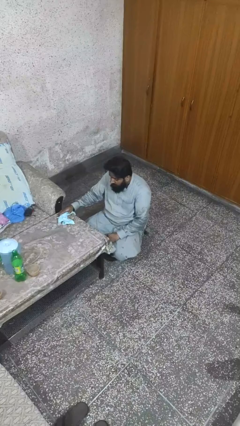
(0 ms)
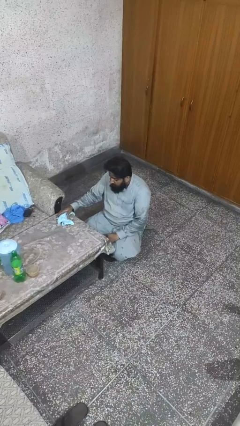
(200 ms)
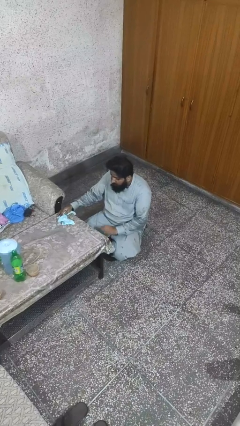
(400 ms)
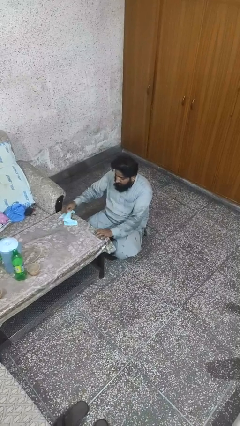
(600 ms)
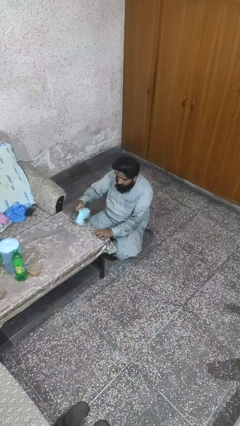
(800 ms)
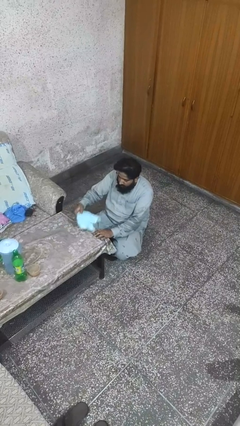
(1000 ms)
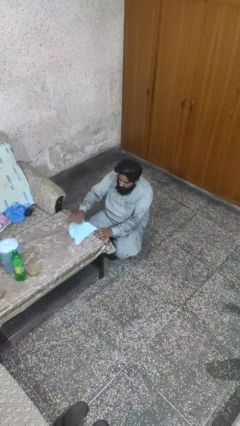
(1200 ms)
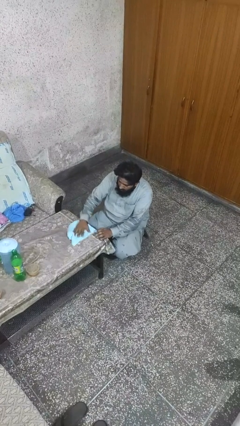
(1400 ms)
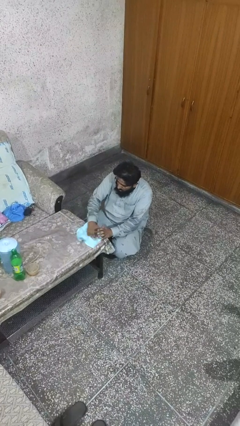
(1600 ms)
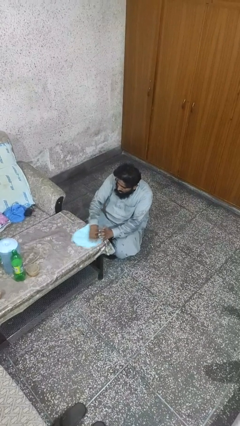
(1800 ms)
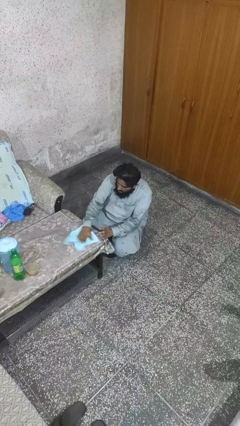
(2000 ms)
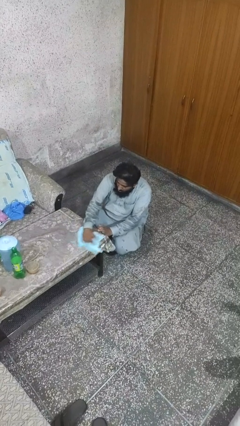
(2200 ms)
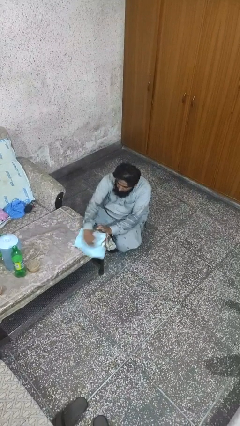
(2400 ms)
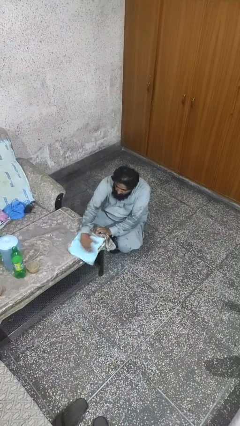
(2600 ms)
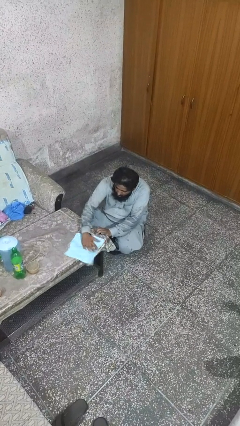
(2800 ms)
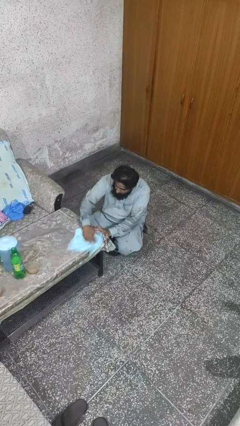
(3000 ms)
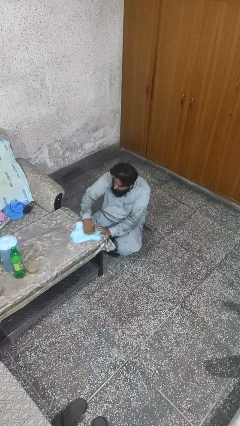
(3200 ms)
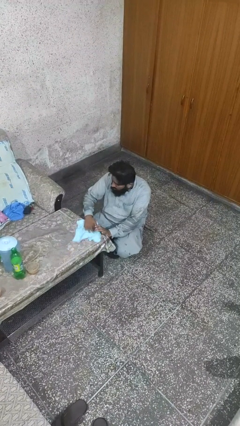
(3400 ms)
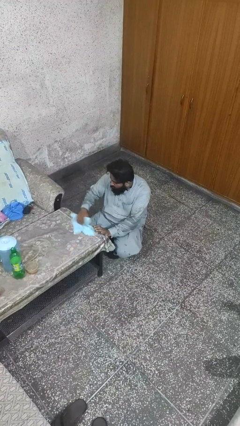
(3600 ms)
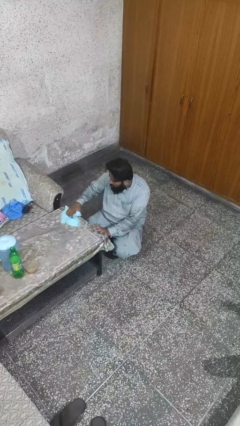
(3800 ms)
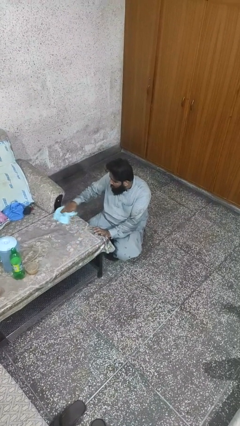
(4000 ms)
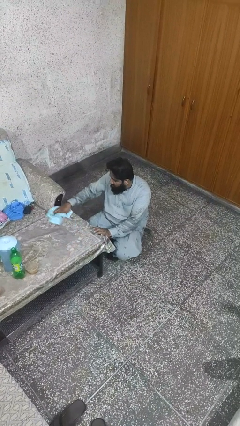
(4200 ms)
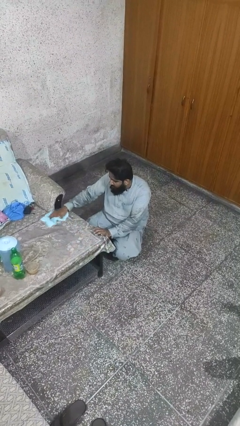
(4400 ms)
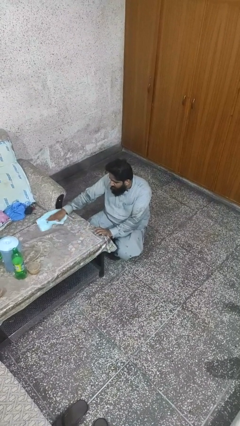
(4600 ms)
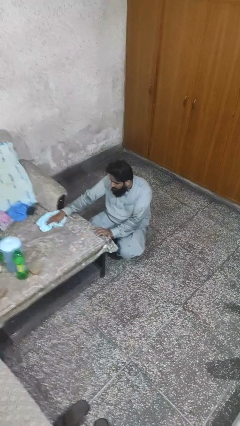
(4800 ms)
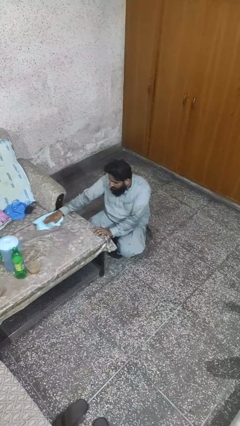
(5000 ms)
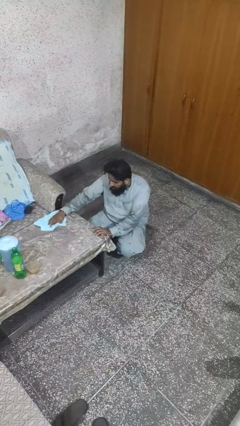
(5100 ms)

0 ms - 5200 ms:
person cleans table with rag

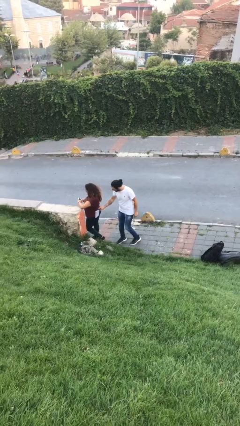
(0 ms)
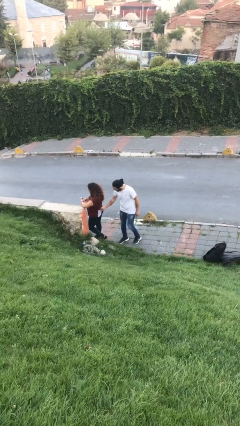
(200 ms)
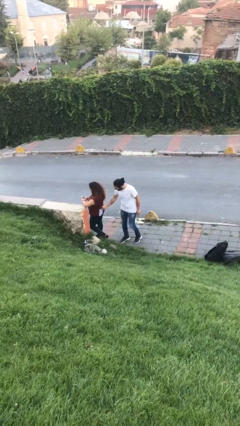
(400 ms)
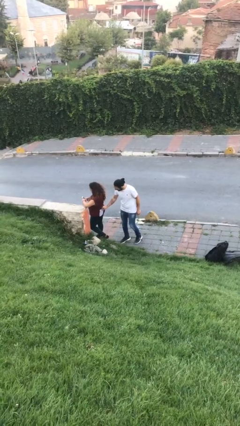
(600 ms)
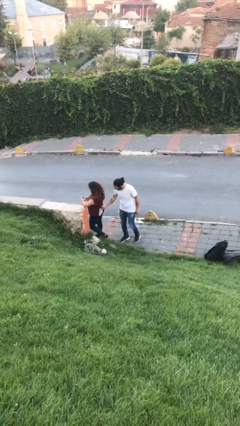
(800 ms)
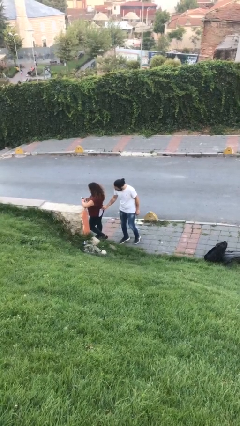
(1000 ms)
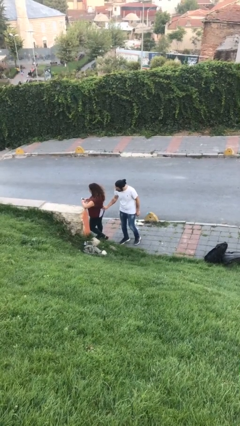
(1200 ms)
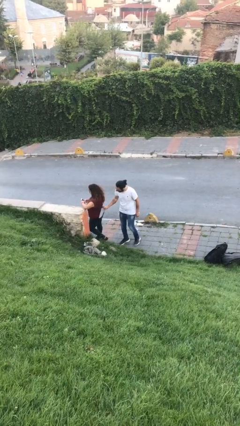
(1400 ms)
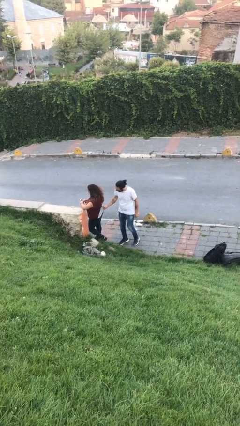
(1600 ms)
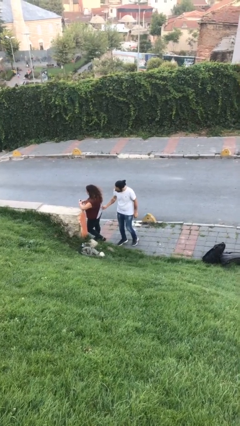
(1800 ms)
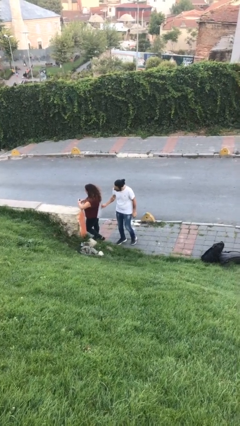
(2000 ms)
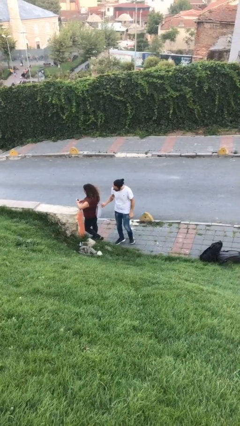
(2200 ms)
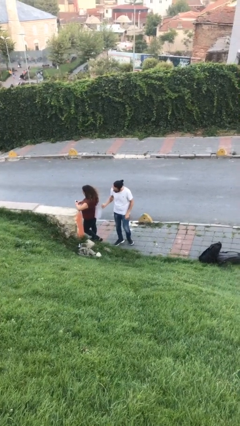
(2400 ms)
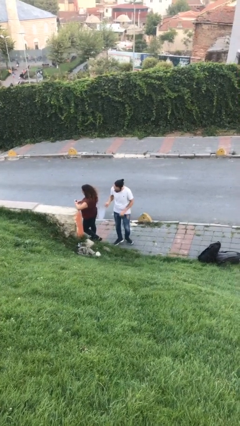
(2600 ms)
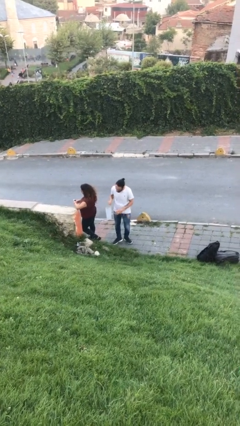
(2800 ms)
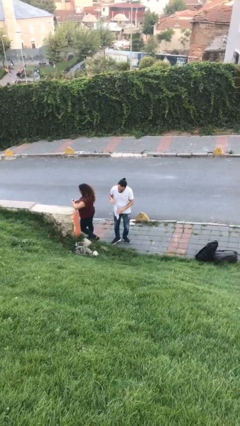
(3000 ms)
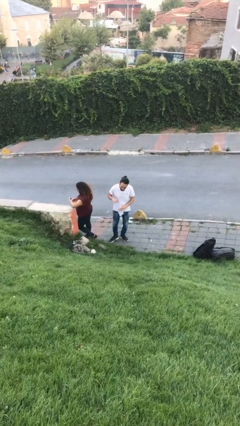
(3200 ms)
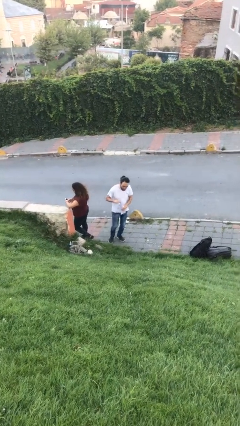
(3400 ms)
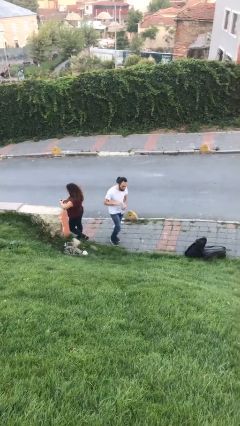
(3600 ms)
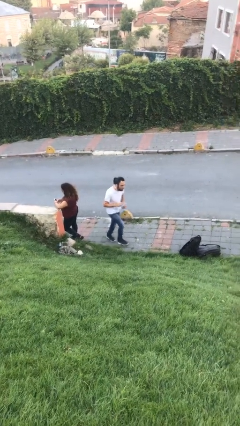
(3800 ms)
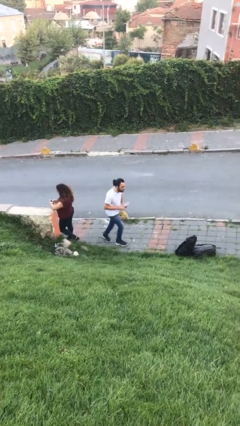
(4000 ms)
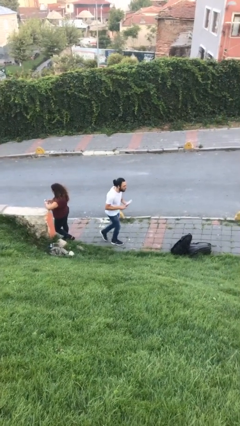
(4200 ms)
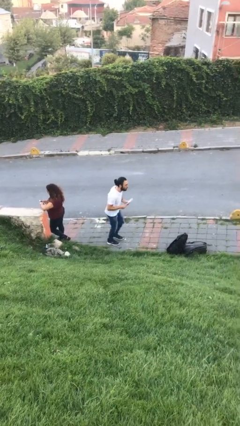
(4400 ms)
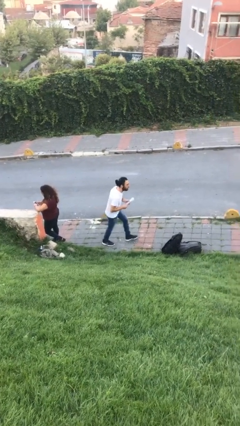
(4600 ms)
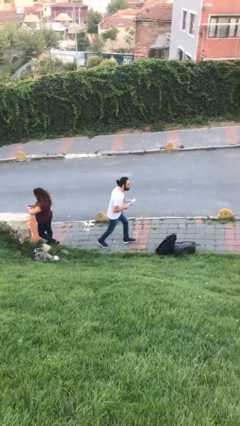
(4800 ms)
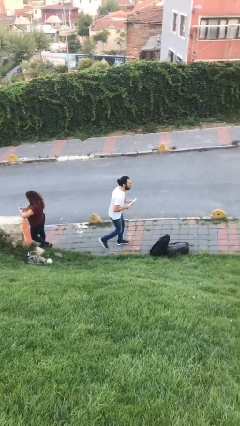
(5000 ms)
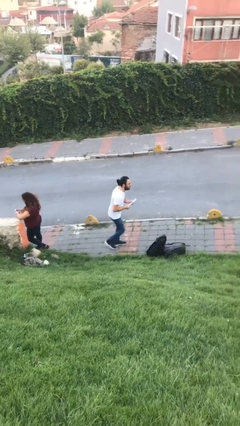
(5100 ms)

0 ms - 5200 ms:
person steals object from person

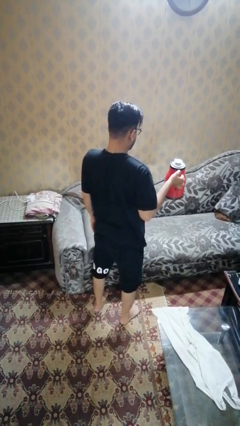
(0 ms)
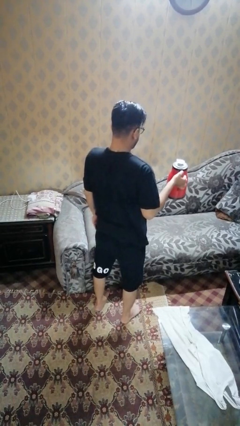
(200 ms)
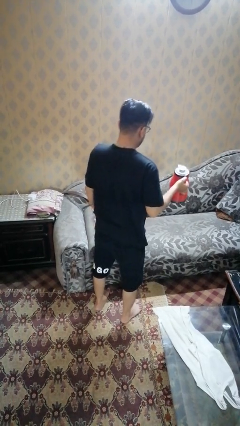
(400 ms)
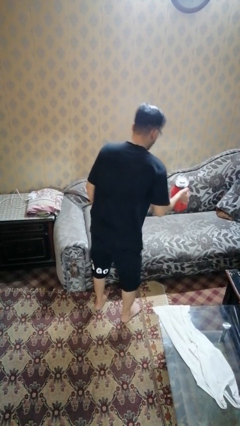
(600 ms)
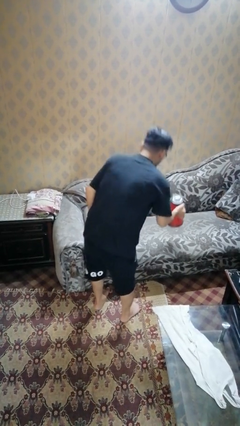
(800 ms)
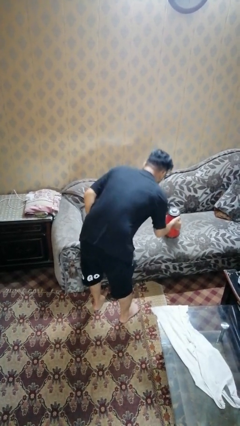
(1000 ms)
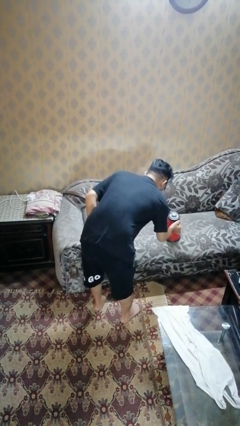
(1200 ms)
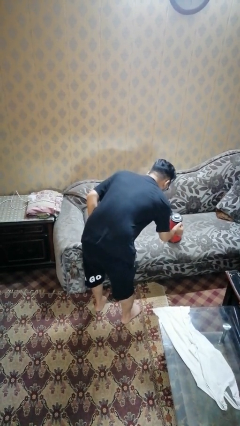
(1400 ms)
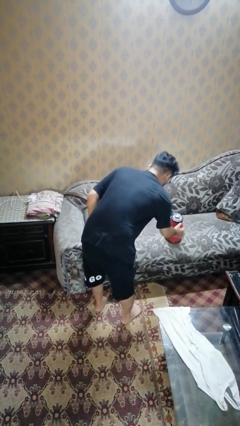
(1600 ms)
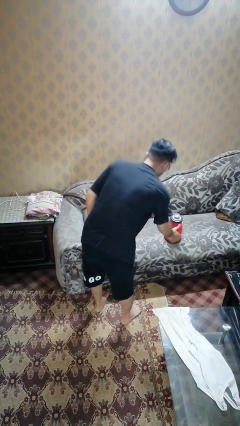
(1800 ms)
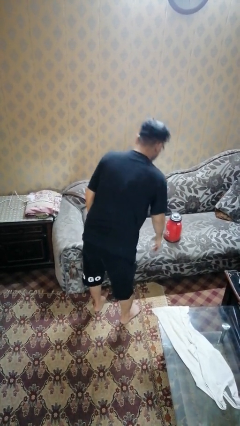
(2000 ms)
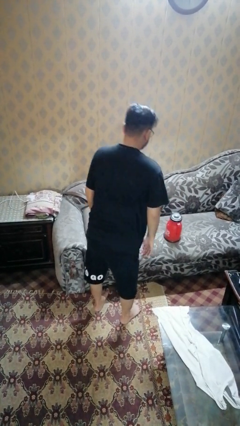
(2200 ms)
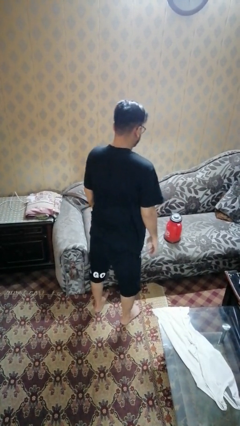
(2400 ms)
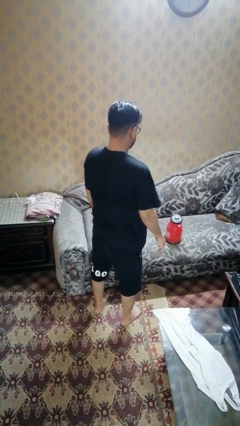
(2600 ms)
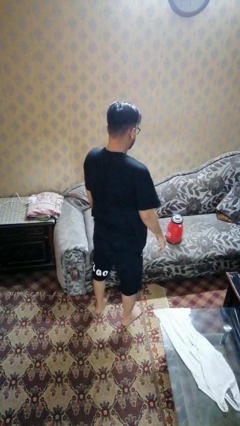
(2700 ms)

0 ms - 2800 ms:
person puts down object on couch

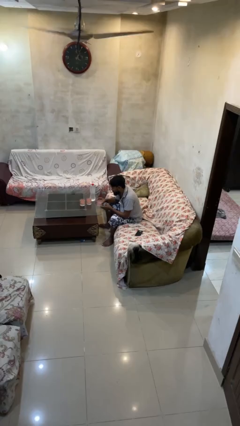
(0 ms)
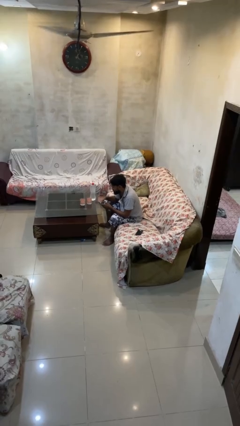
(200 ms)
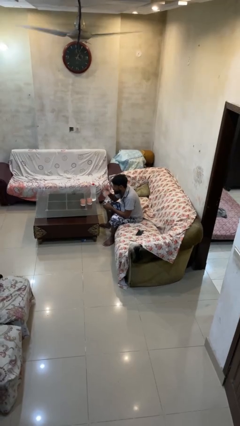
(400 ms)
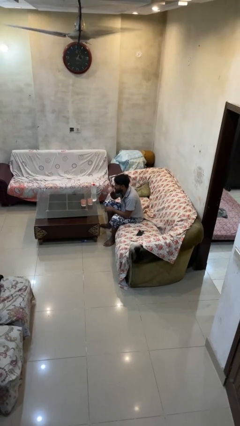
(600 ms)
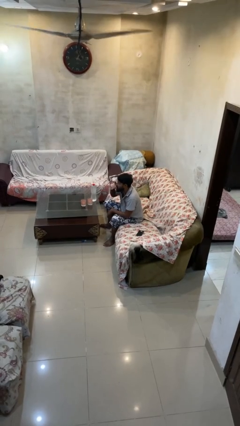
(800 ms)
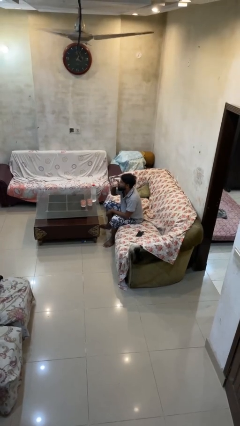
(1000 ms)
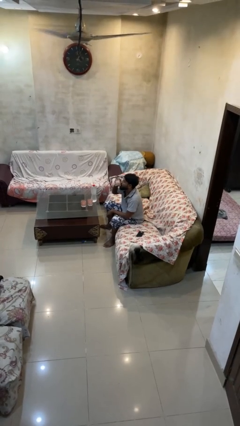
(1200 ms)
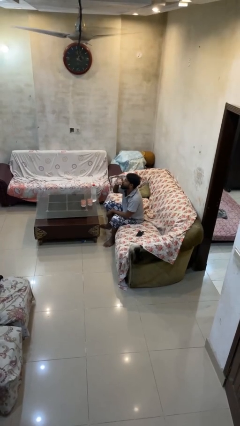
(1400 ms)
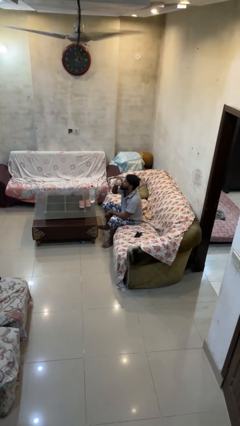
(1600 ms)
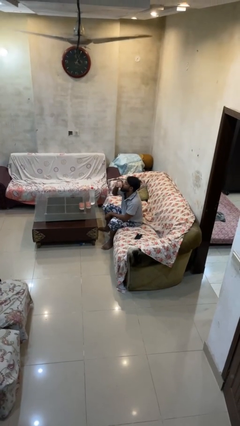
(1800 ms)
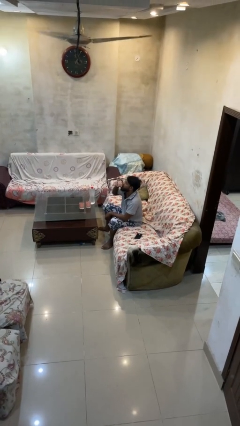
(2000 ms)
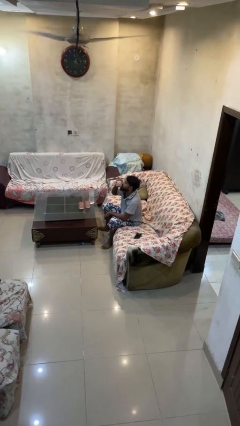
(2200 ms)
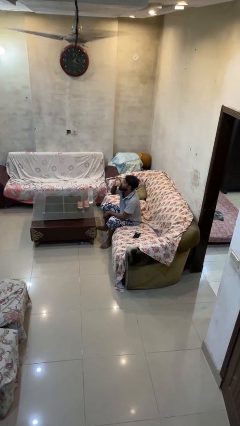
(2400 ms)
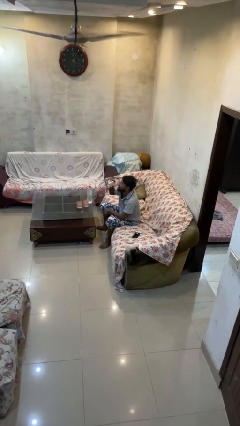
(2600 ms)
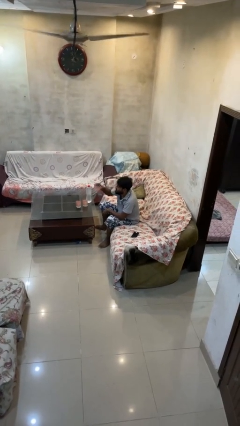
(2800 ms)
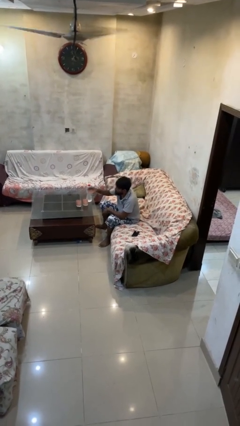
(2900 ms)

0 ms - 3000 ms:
person drinks from shotglass

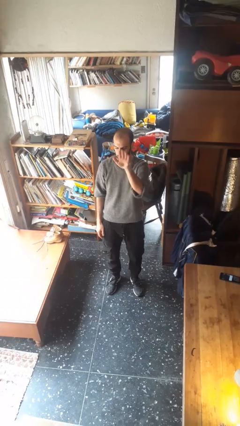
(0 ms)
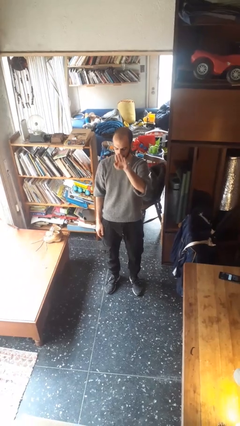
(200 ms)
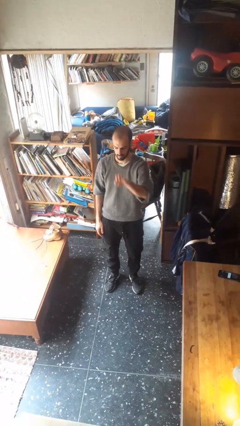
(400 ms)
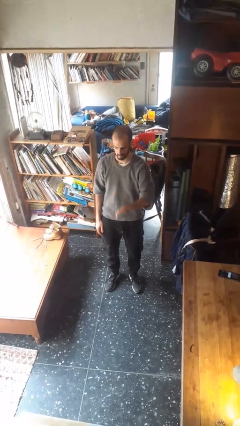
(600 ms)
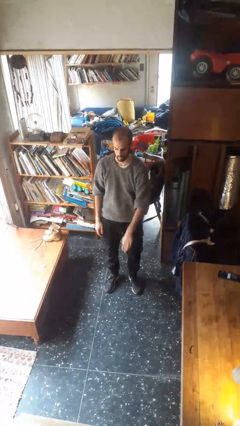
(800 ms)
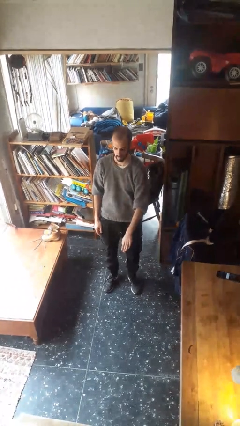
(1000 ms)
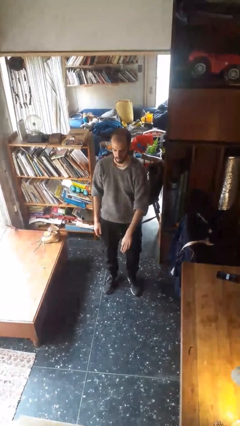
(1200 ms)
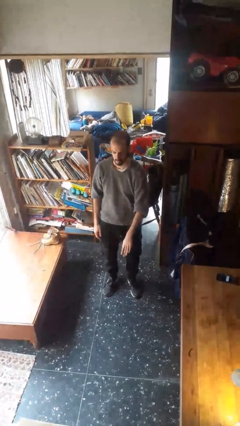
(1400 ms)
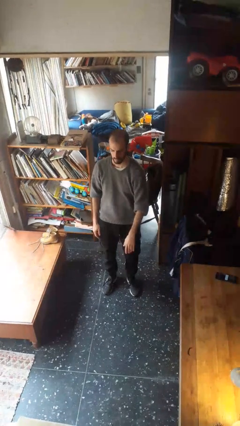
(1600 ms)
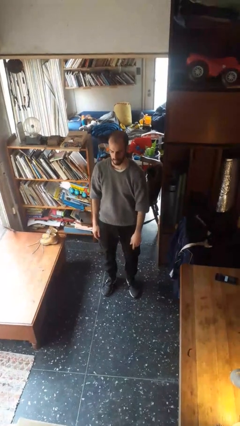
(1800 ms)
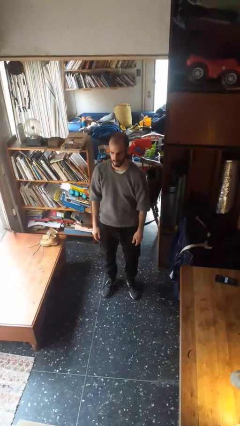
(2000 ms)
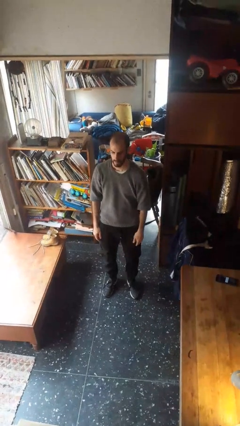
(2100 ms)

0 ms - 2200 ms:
person gestures swipe down
